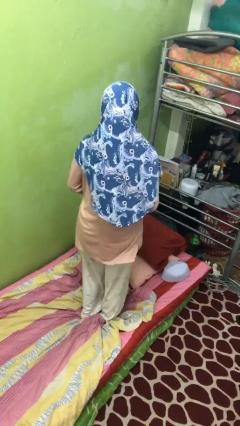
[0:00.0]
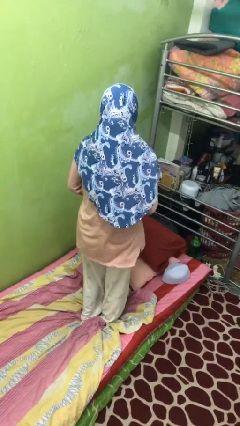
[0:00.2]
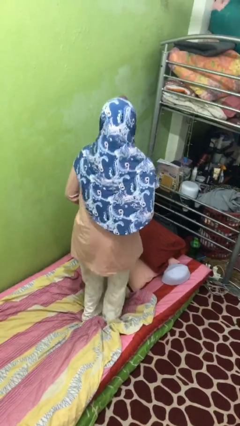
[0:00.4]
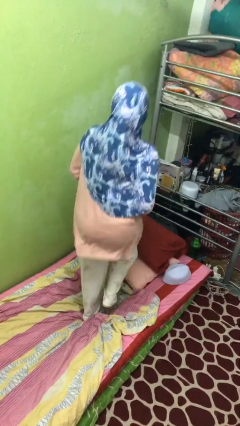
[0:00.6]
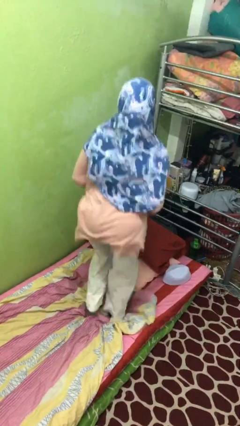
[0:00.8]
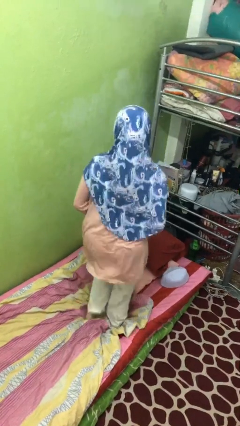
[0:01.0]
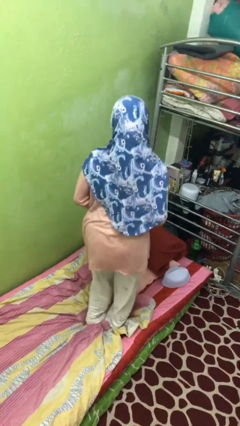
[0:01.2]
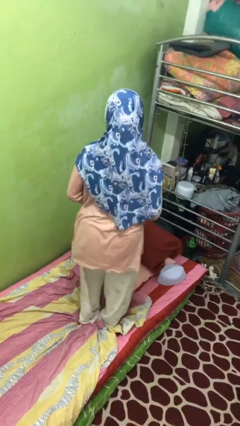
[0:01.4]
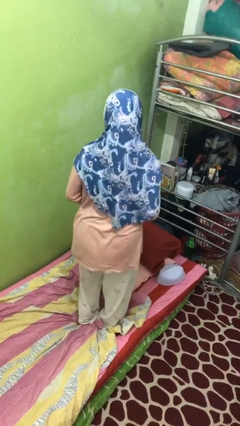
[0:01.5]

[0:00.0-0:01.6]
person jumps on bed

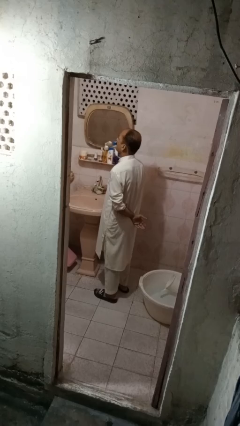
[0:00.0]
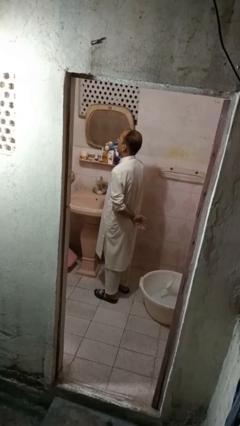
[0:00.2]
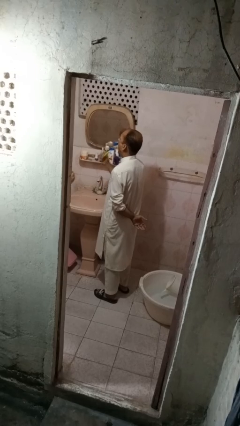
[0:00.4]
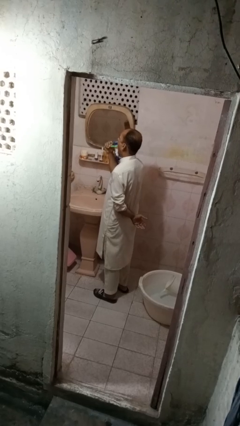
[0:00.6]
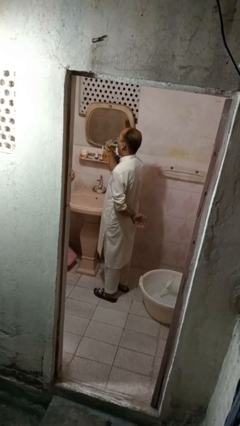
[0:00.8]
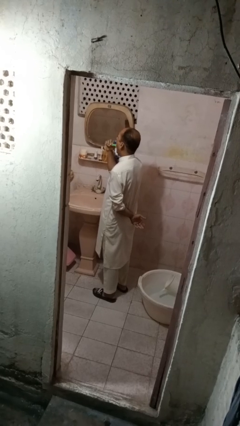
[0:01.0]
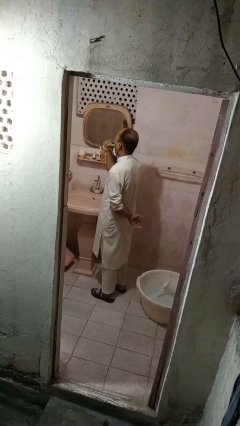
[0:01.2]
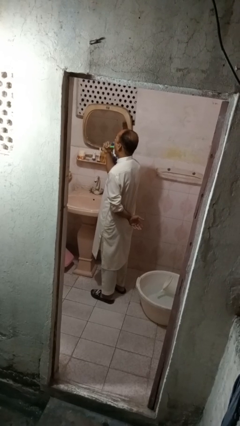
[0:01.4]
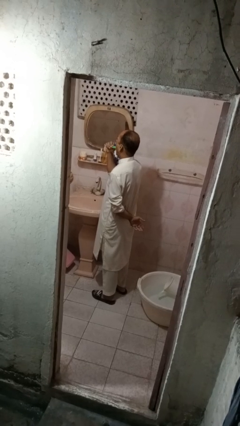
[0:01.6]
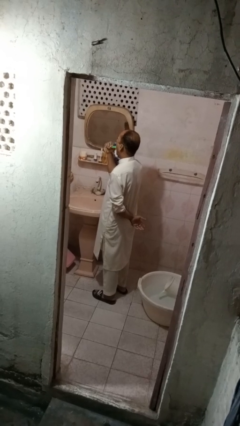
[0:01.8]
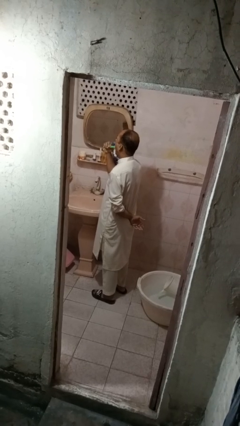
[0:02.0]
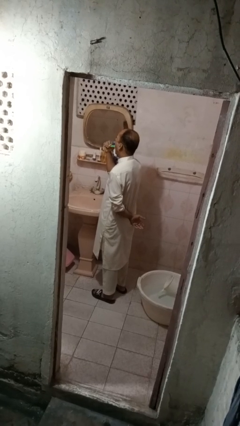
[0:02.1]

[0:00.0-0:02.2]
person brushes teeth

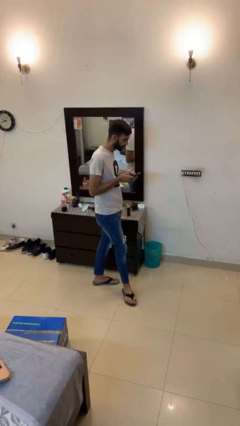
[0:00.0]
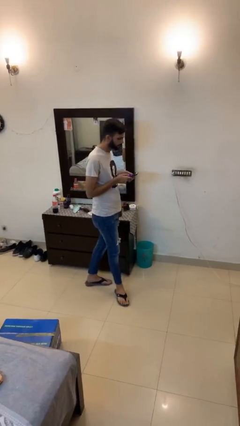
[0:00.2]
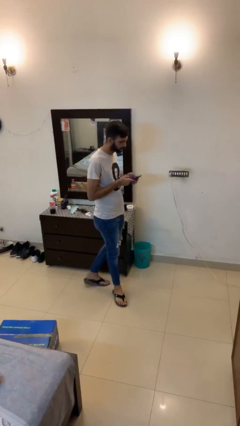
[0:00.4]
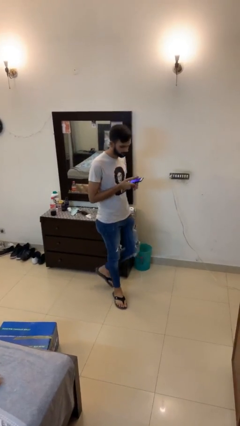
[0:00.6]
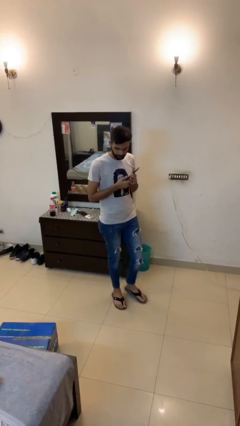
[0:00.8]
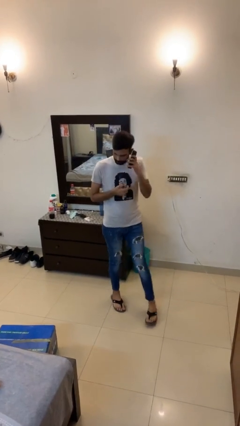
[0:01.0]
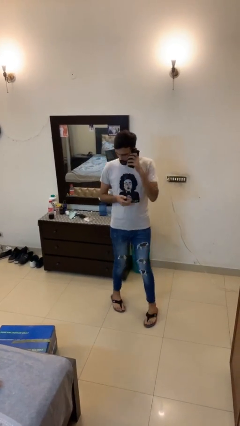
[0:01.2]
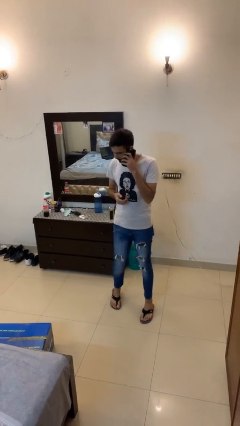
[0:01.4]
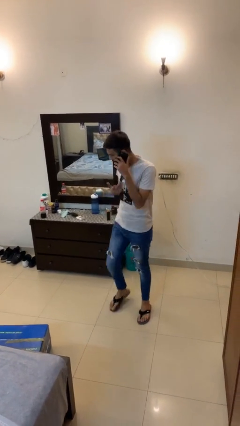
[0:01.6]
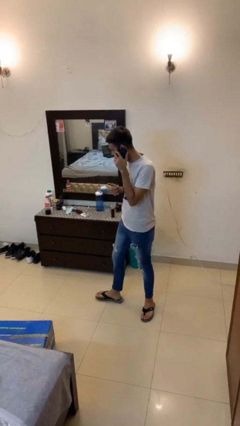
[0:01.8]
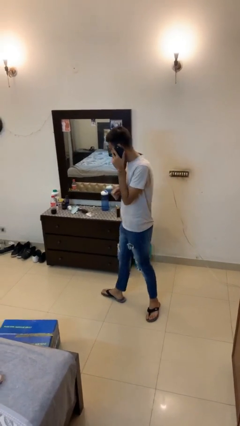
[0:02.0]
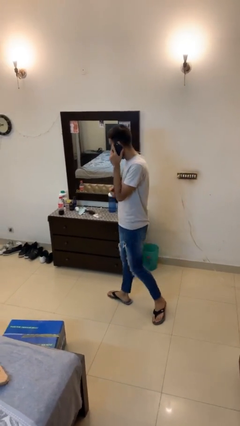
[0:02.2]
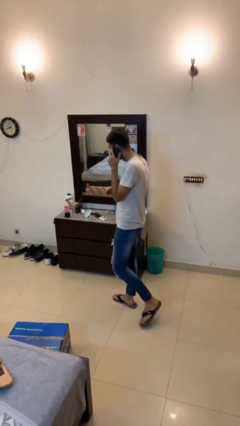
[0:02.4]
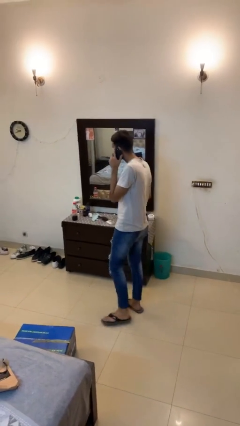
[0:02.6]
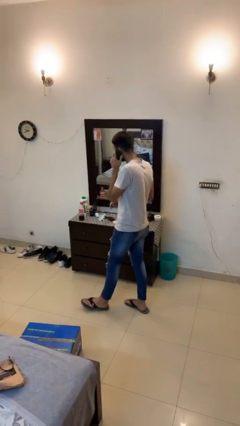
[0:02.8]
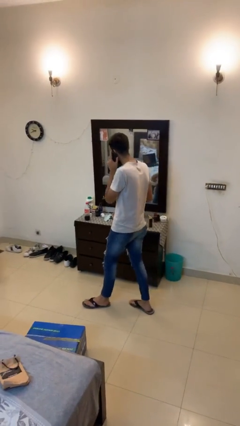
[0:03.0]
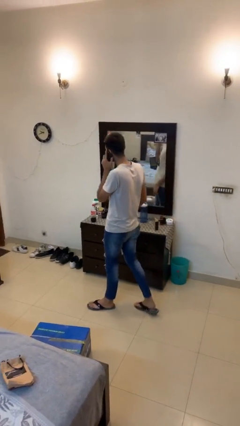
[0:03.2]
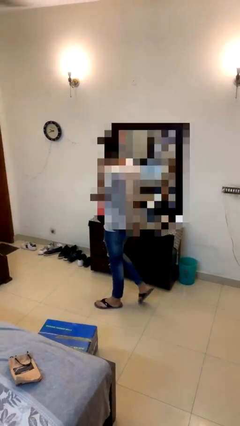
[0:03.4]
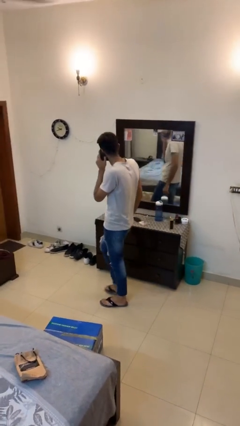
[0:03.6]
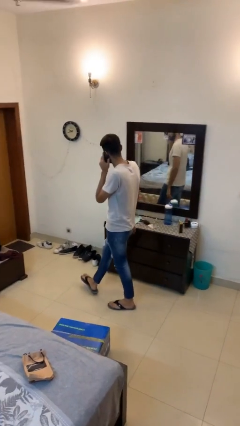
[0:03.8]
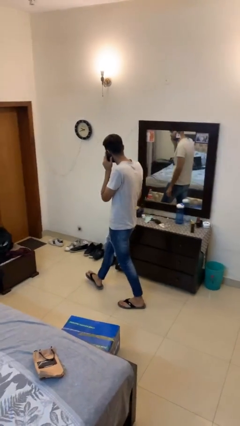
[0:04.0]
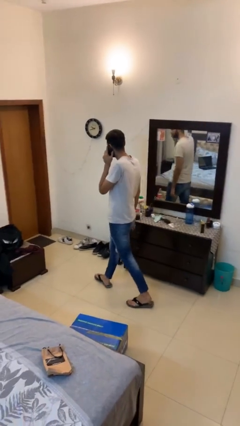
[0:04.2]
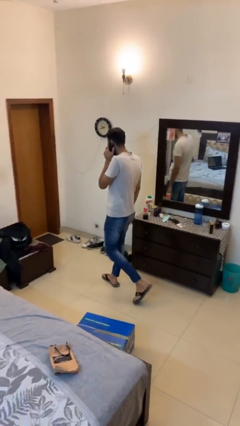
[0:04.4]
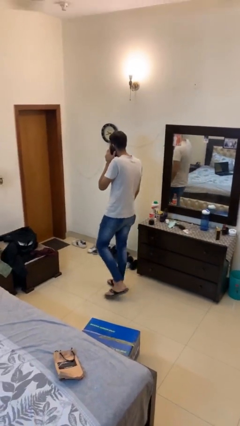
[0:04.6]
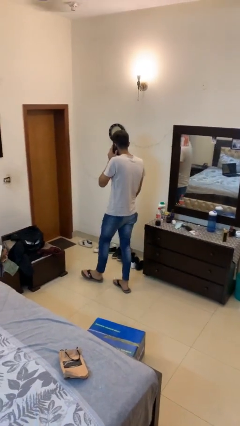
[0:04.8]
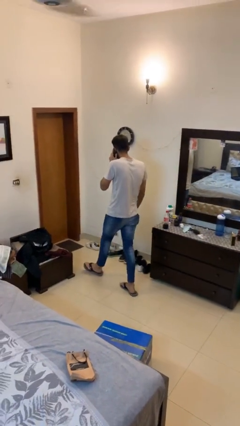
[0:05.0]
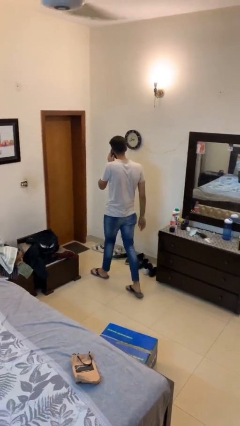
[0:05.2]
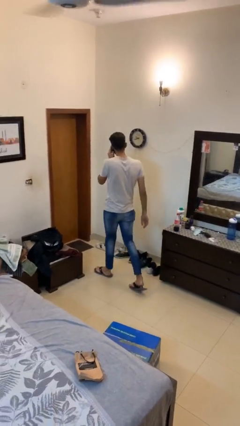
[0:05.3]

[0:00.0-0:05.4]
person talks on phone

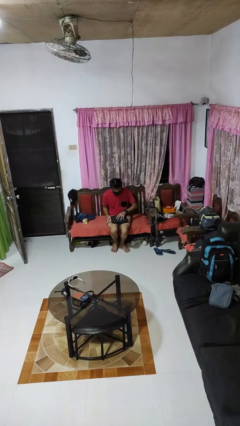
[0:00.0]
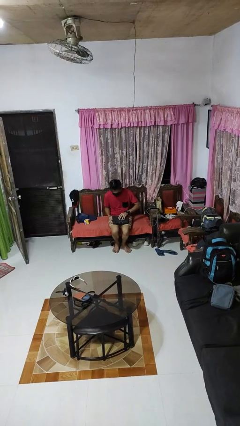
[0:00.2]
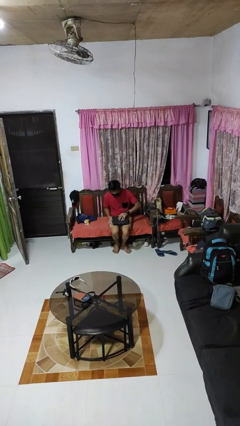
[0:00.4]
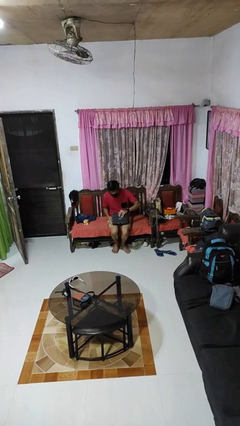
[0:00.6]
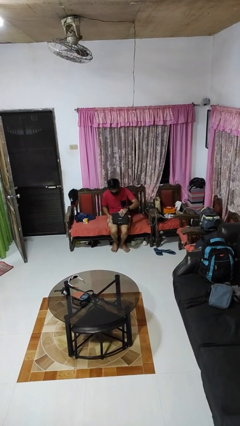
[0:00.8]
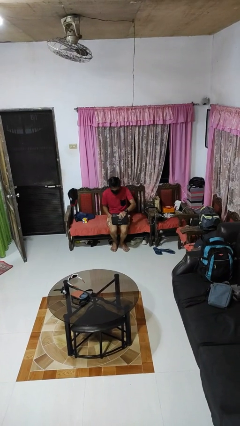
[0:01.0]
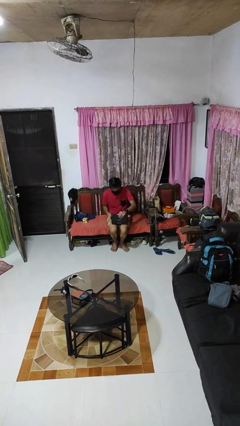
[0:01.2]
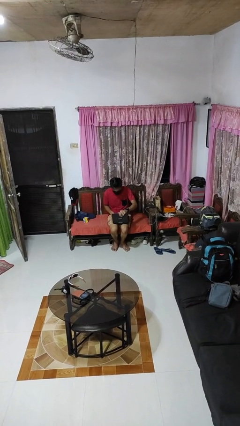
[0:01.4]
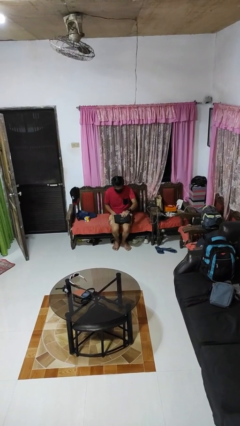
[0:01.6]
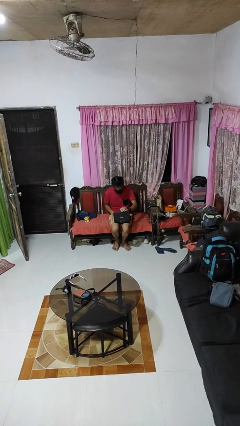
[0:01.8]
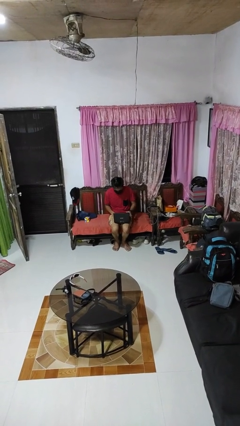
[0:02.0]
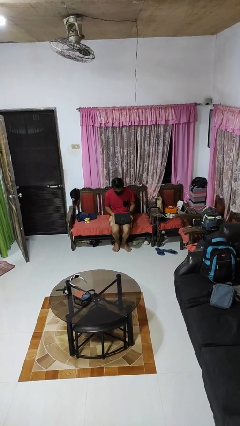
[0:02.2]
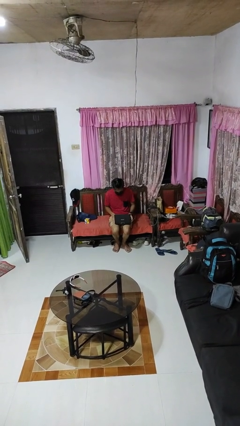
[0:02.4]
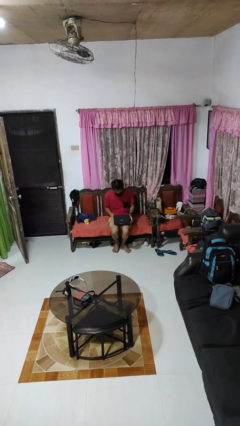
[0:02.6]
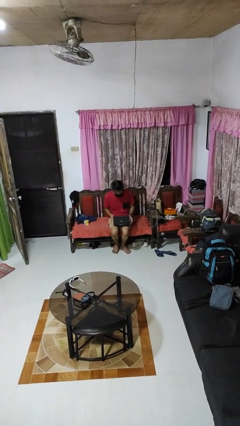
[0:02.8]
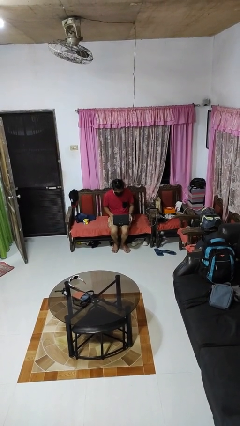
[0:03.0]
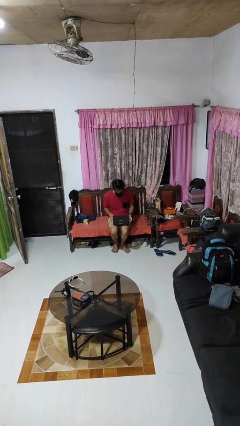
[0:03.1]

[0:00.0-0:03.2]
person opens laptop

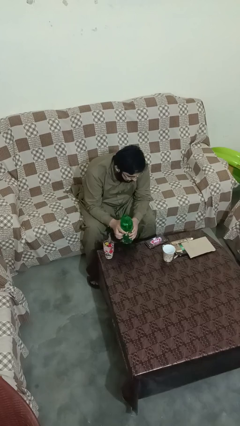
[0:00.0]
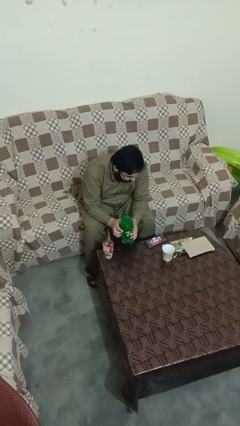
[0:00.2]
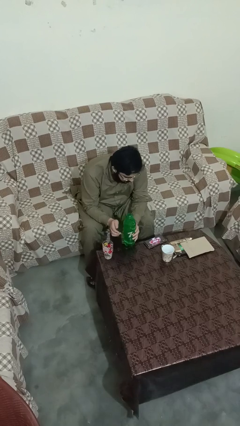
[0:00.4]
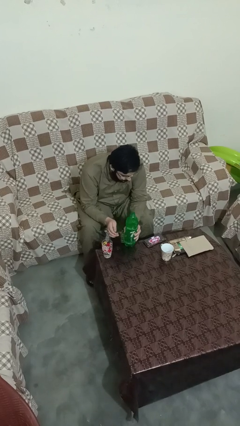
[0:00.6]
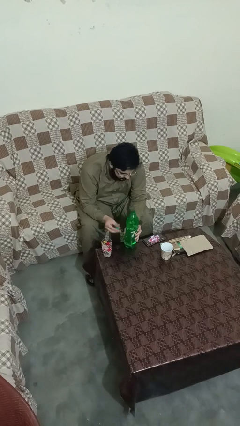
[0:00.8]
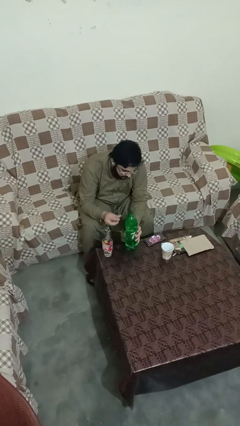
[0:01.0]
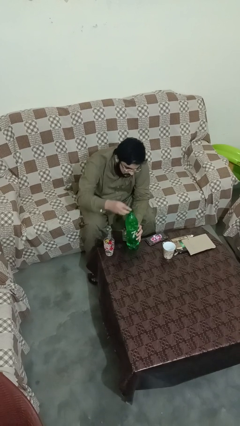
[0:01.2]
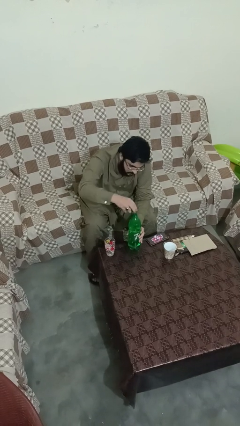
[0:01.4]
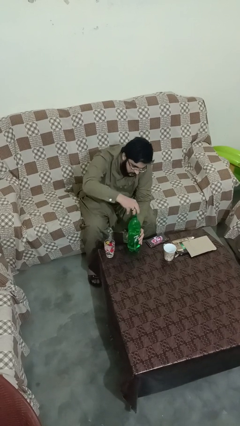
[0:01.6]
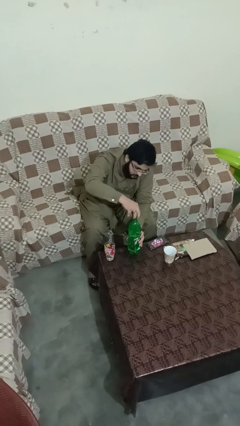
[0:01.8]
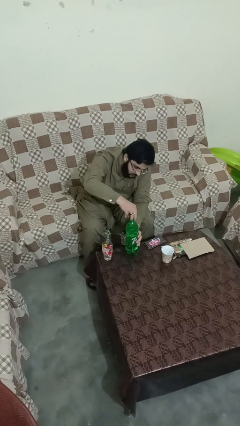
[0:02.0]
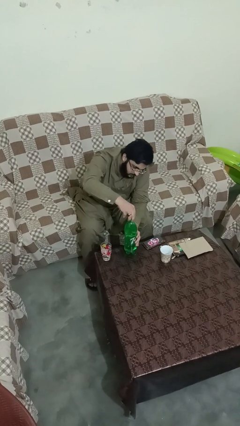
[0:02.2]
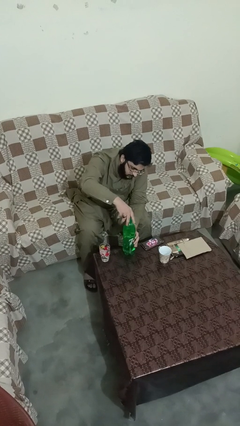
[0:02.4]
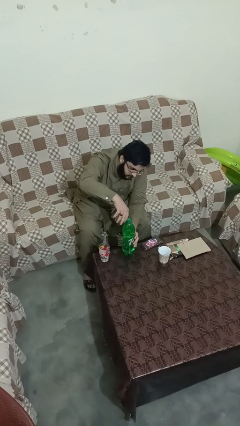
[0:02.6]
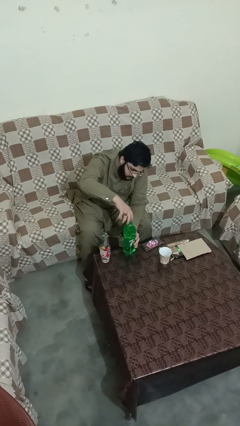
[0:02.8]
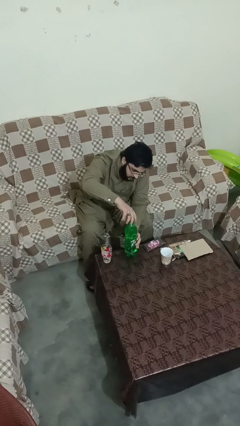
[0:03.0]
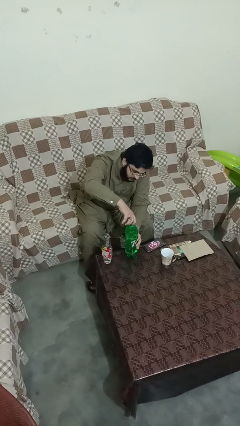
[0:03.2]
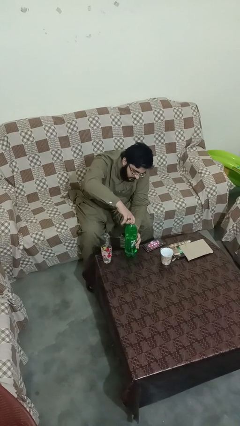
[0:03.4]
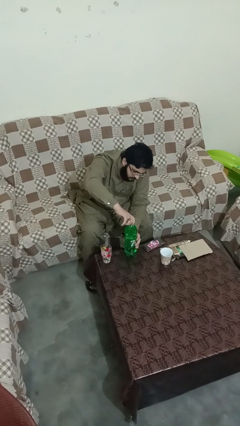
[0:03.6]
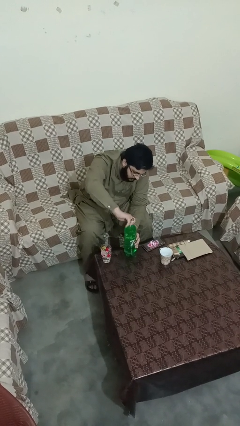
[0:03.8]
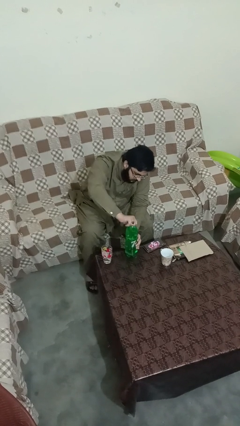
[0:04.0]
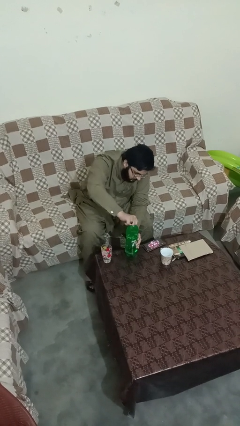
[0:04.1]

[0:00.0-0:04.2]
person screws lid to bottle

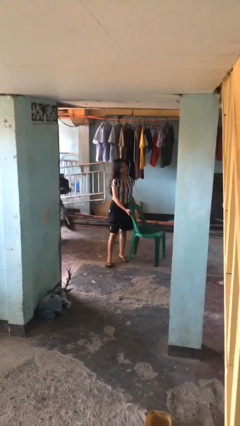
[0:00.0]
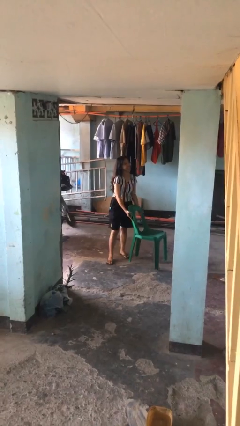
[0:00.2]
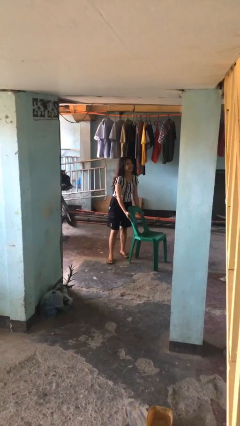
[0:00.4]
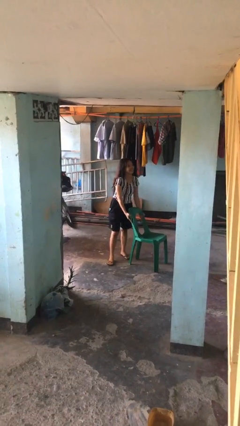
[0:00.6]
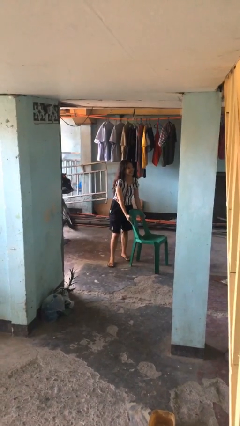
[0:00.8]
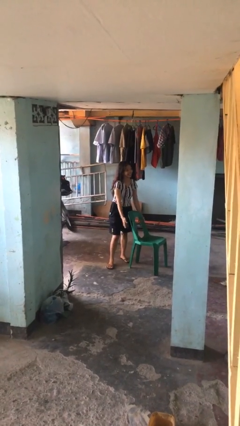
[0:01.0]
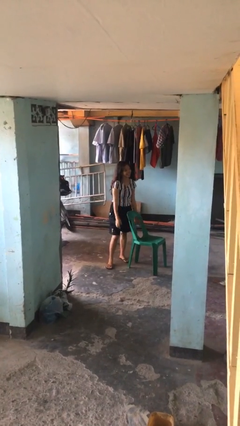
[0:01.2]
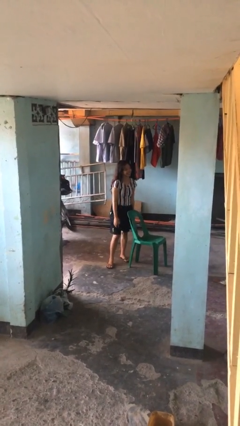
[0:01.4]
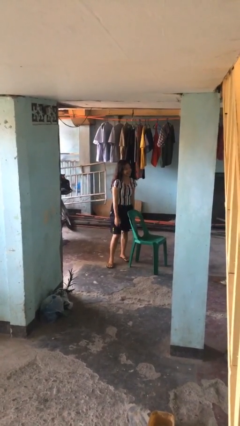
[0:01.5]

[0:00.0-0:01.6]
person puts down object on floor
